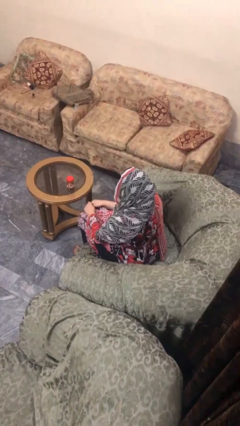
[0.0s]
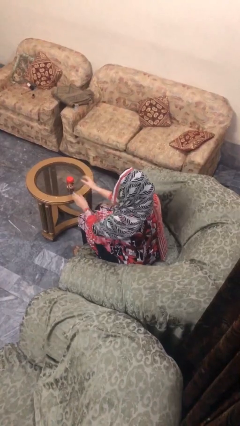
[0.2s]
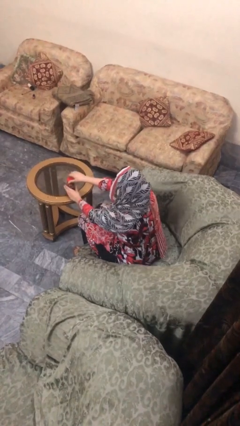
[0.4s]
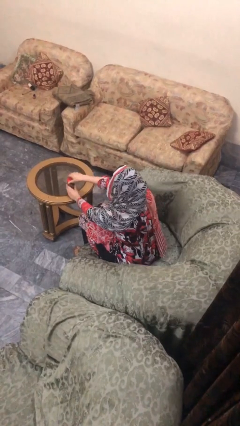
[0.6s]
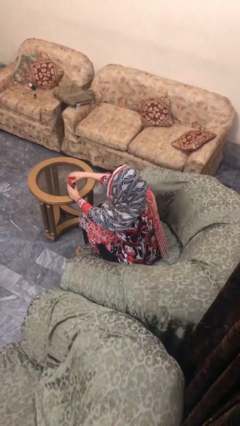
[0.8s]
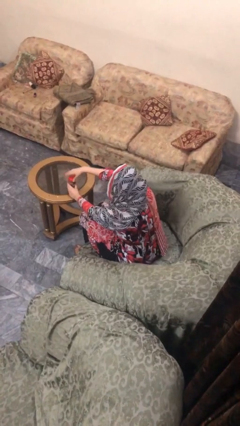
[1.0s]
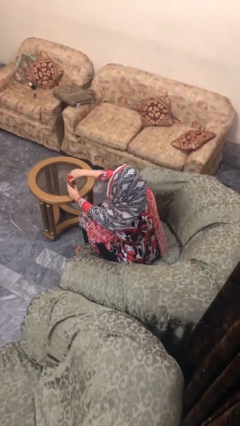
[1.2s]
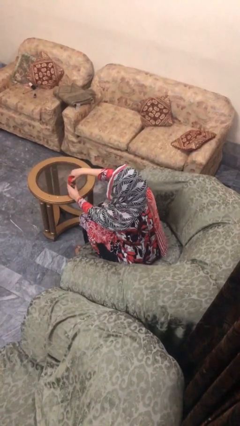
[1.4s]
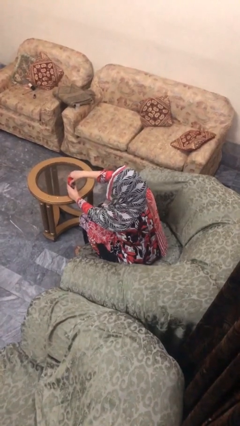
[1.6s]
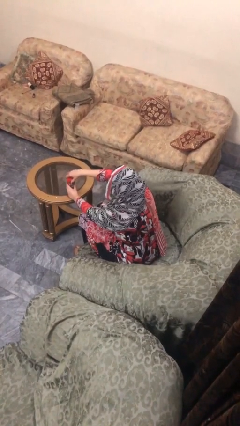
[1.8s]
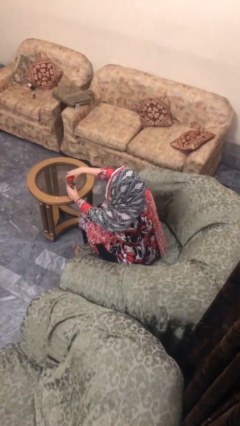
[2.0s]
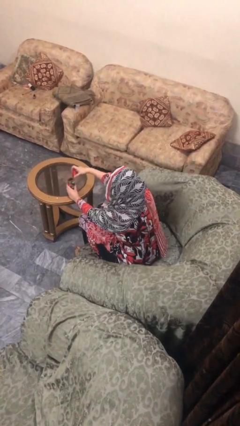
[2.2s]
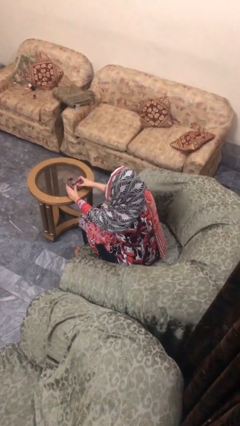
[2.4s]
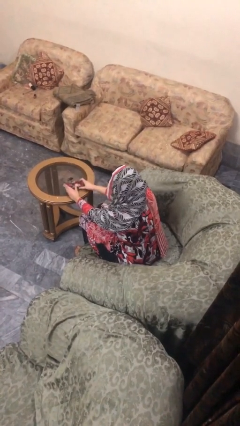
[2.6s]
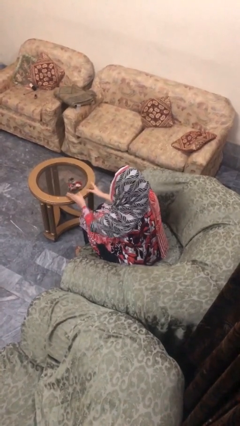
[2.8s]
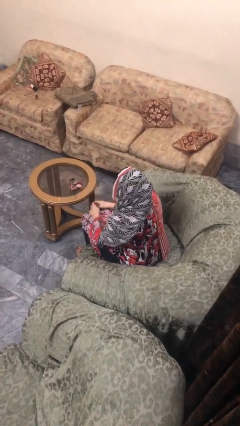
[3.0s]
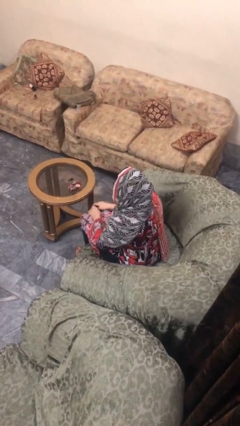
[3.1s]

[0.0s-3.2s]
person opens jar

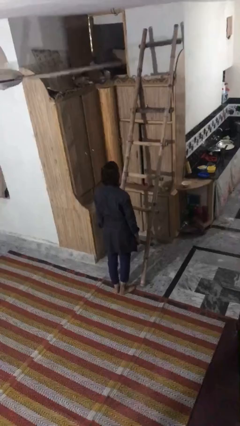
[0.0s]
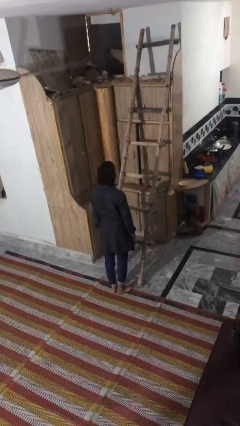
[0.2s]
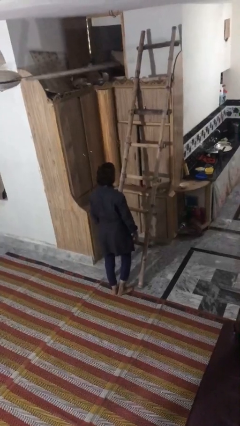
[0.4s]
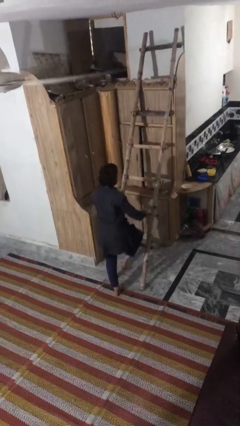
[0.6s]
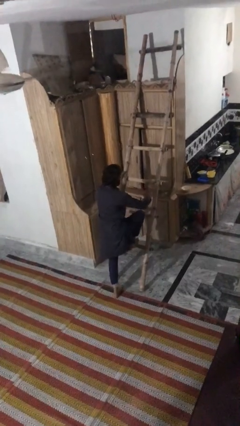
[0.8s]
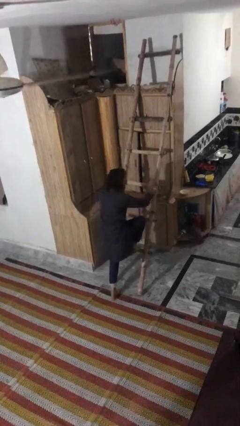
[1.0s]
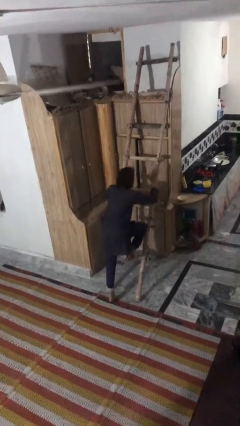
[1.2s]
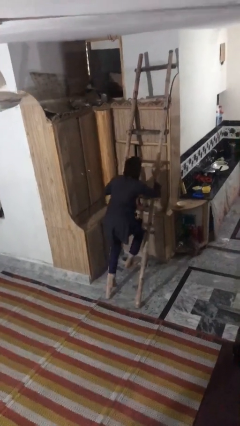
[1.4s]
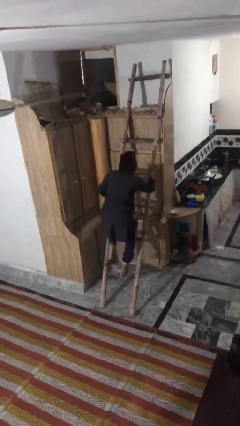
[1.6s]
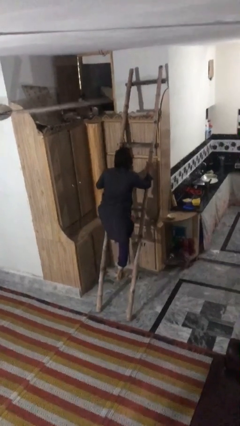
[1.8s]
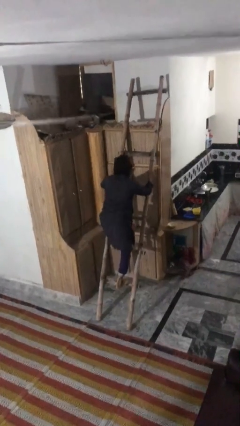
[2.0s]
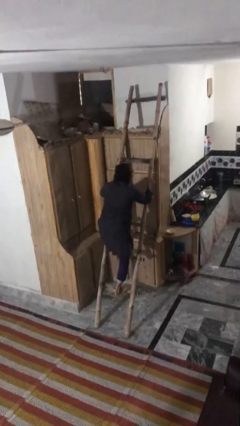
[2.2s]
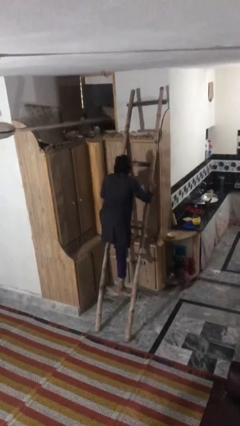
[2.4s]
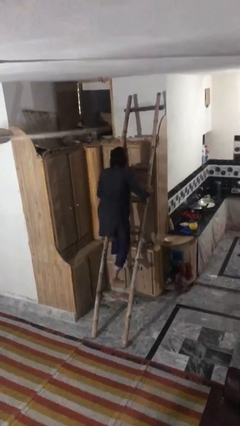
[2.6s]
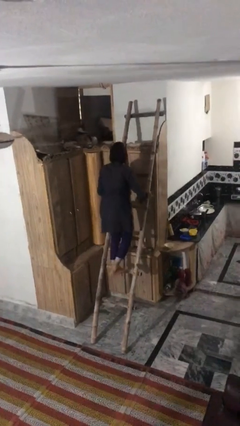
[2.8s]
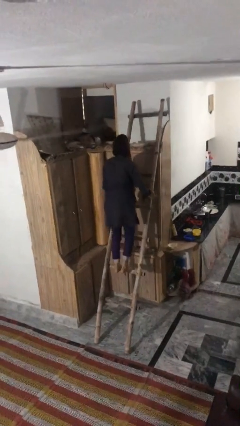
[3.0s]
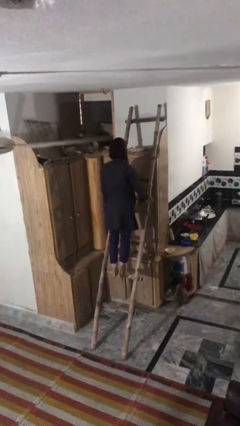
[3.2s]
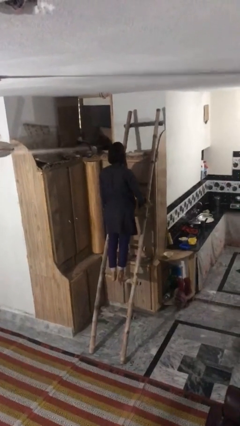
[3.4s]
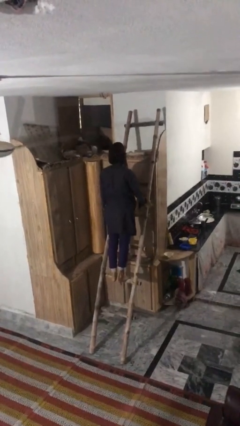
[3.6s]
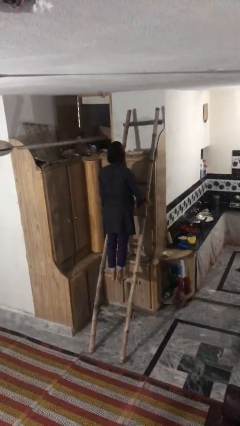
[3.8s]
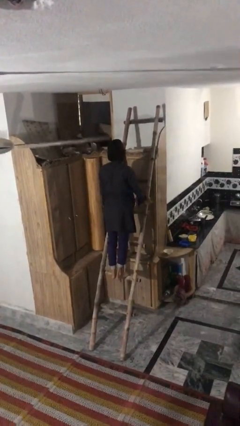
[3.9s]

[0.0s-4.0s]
person climbs up ladder

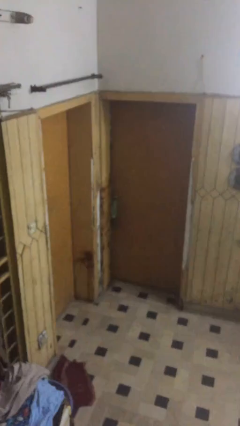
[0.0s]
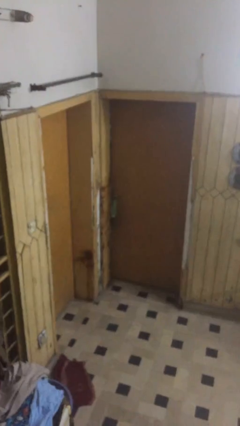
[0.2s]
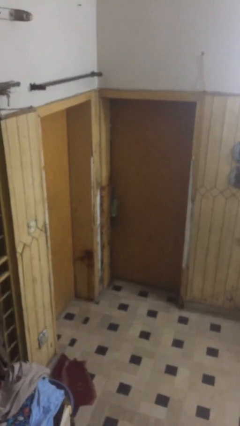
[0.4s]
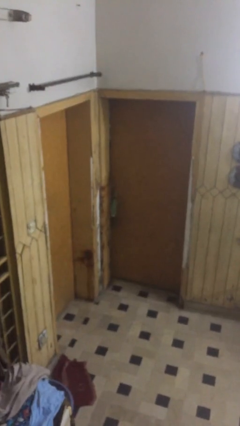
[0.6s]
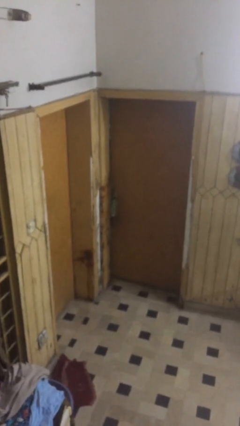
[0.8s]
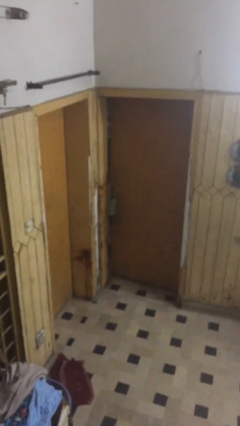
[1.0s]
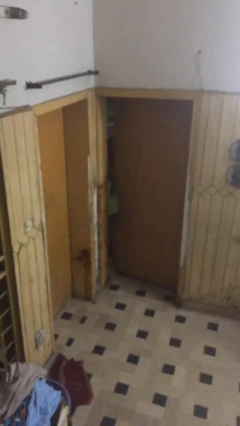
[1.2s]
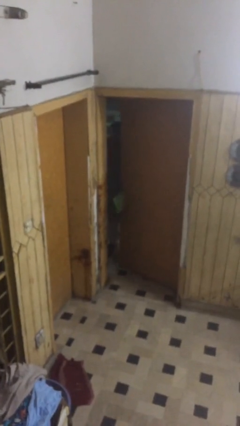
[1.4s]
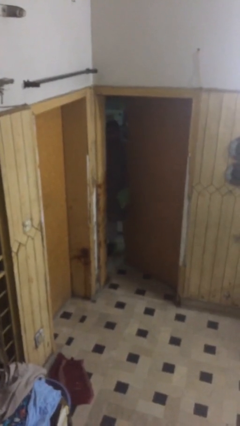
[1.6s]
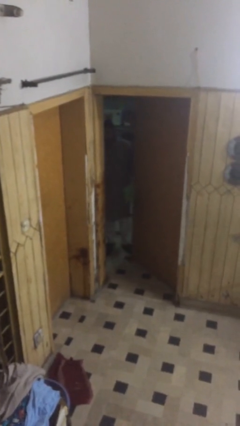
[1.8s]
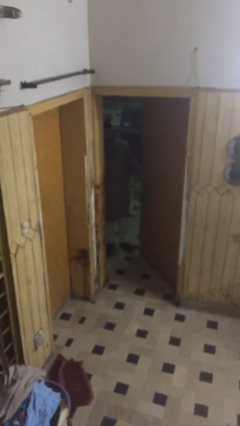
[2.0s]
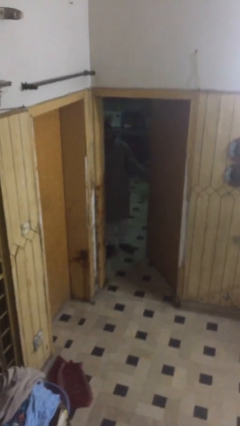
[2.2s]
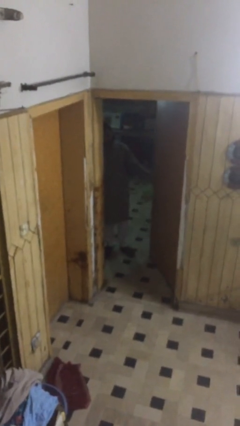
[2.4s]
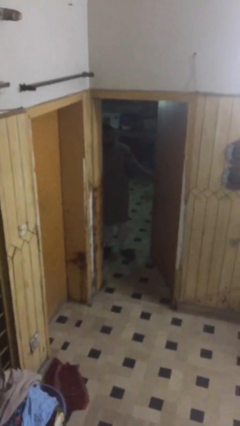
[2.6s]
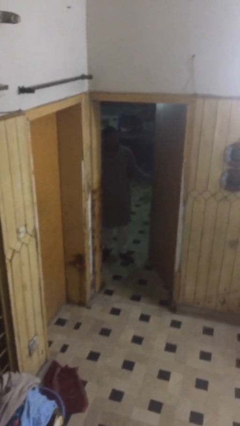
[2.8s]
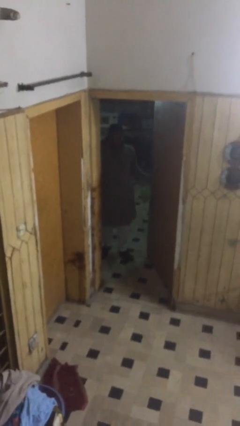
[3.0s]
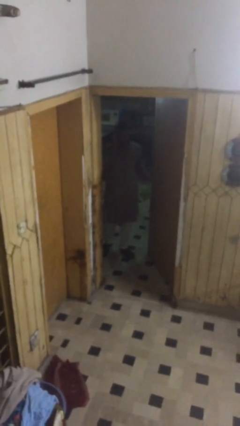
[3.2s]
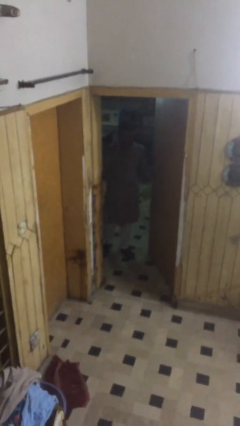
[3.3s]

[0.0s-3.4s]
person opens facility door

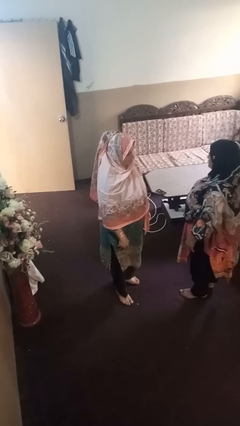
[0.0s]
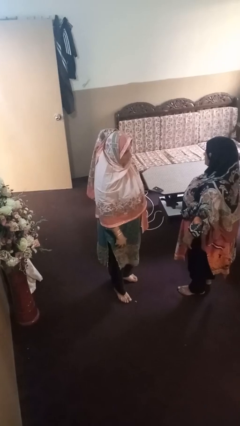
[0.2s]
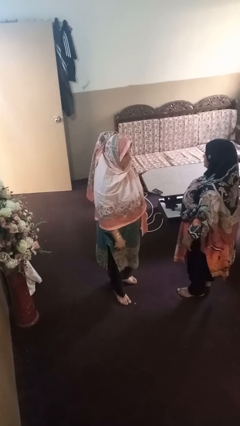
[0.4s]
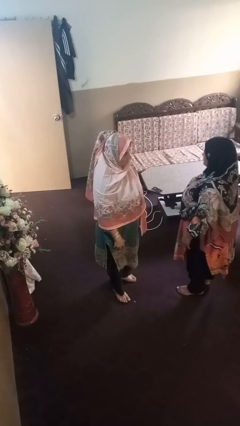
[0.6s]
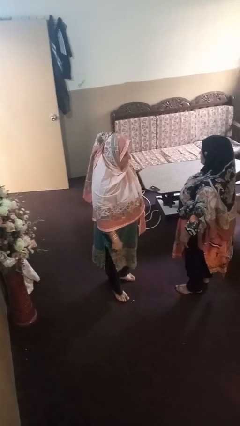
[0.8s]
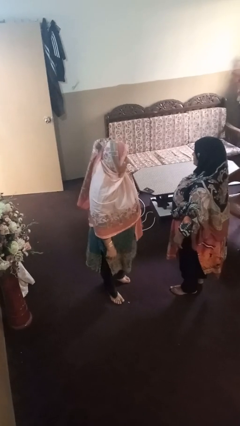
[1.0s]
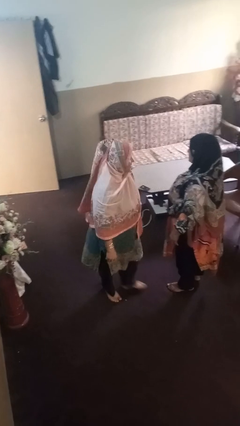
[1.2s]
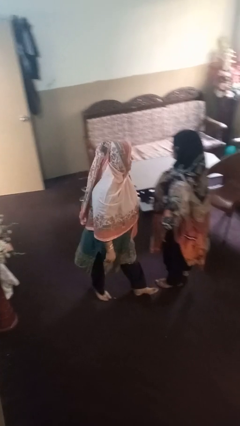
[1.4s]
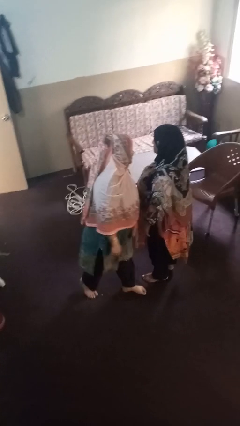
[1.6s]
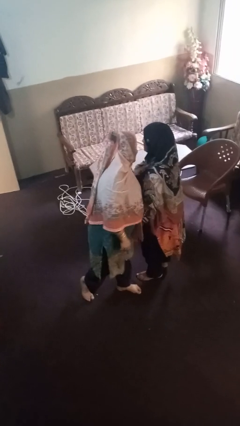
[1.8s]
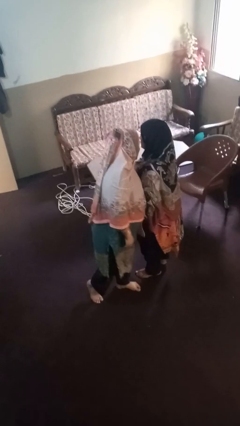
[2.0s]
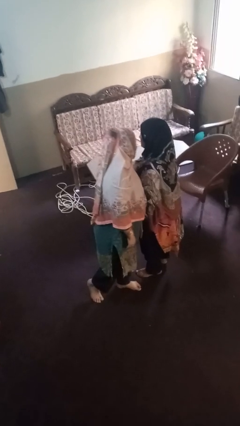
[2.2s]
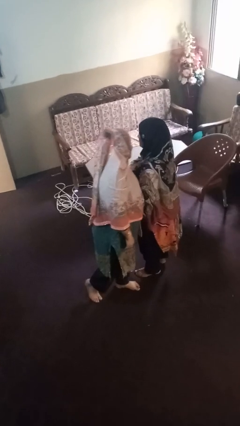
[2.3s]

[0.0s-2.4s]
person laughs with person

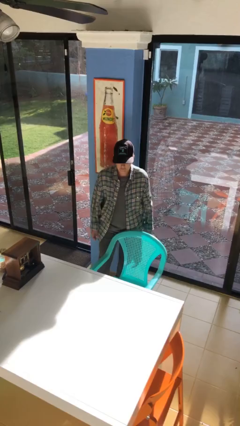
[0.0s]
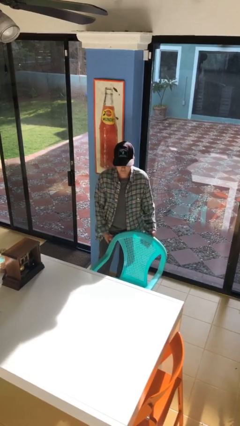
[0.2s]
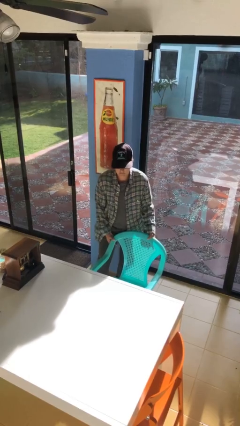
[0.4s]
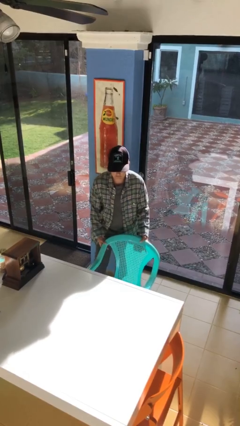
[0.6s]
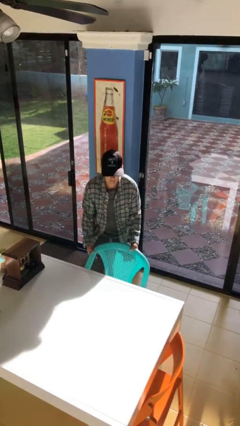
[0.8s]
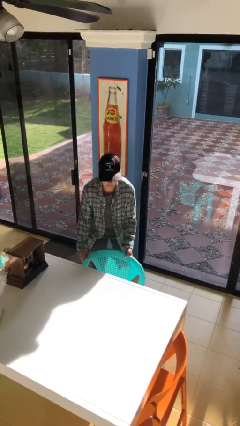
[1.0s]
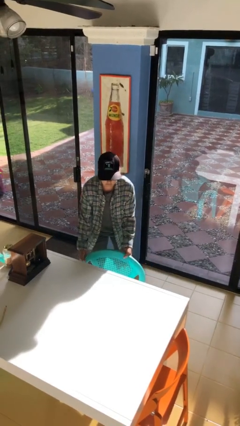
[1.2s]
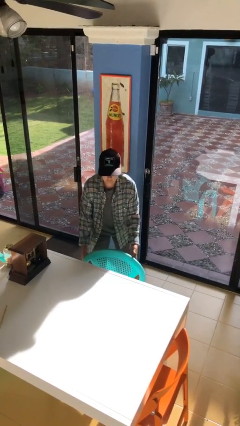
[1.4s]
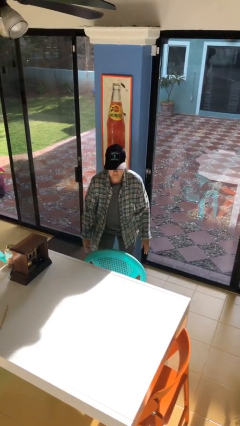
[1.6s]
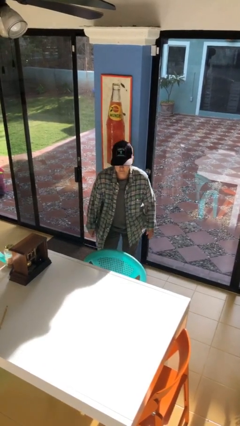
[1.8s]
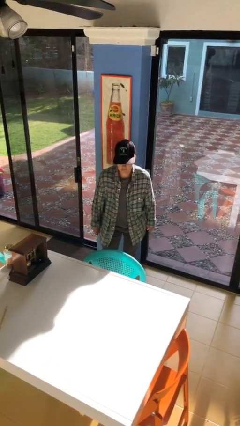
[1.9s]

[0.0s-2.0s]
person pushes in chair

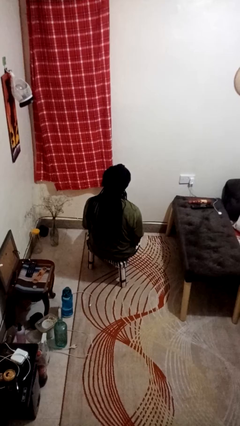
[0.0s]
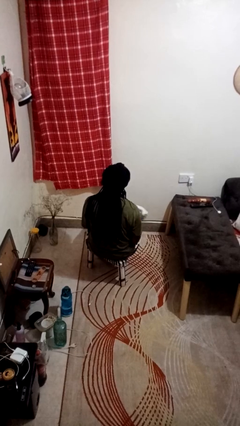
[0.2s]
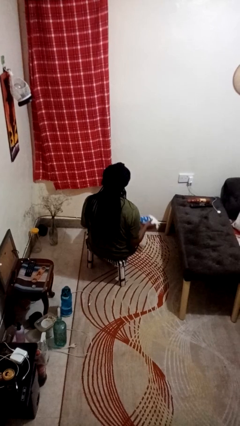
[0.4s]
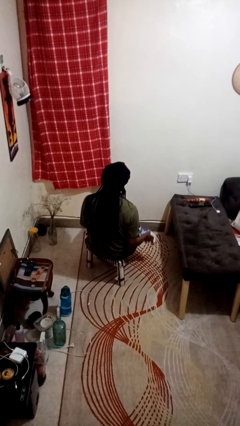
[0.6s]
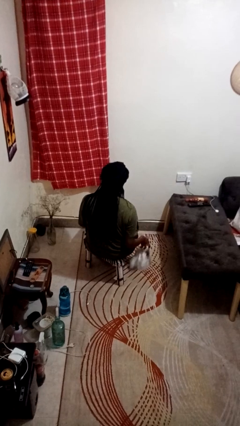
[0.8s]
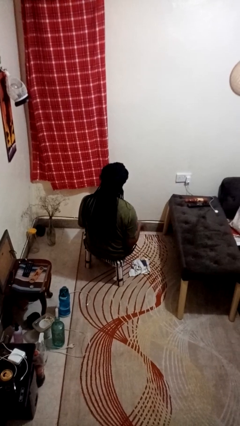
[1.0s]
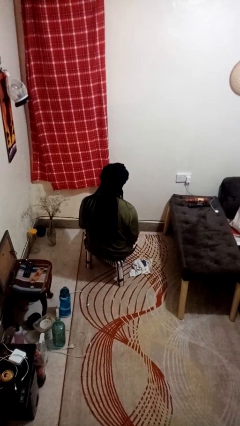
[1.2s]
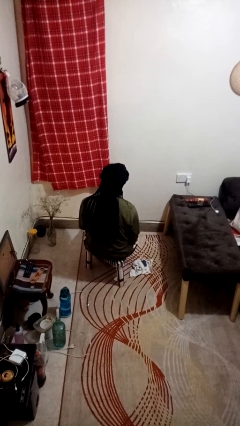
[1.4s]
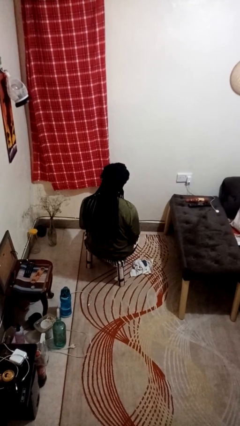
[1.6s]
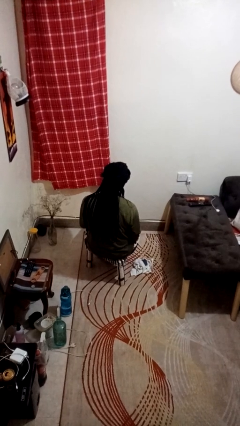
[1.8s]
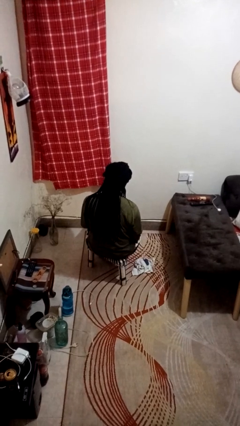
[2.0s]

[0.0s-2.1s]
person throws object to ground

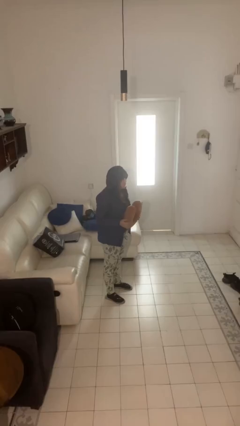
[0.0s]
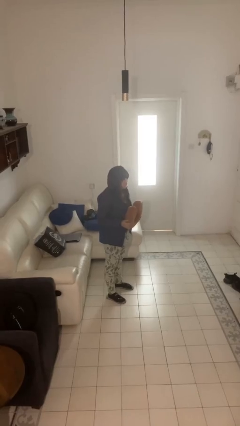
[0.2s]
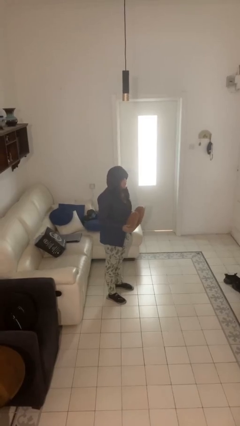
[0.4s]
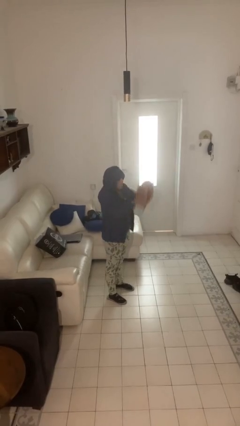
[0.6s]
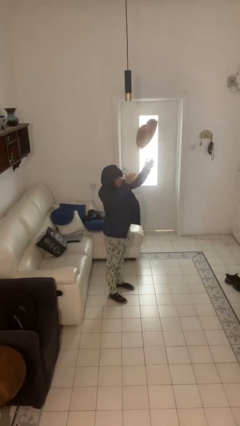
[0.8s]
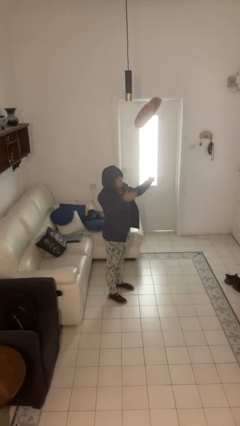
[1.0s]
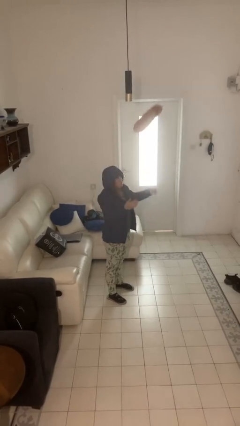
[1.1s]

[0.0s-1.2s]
person drops object
